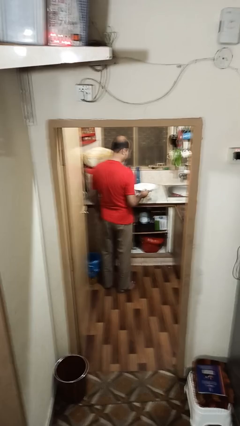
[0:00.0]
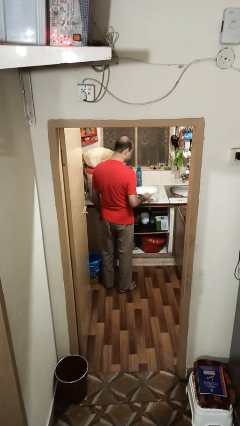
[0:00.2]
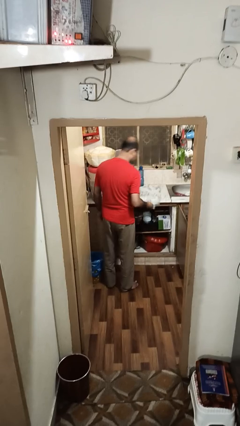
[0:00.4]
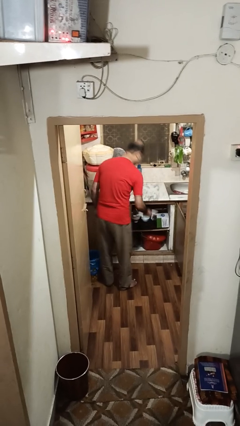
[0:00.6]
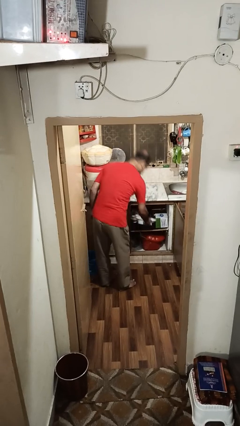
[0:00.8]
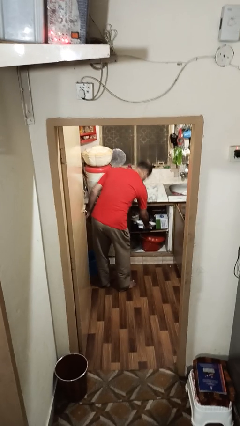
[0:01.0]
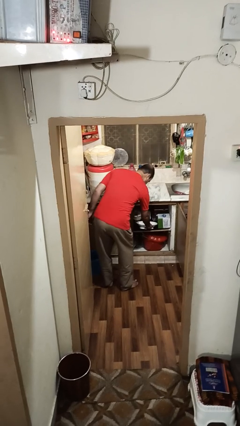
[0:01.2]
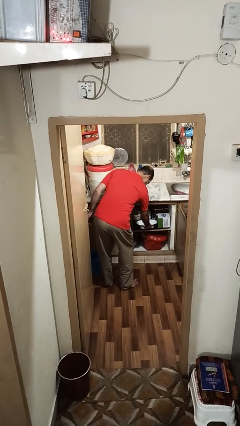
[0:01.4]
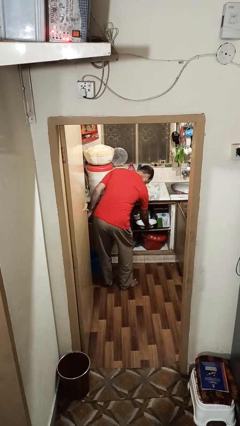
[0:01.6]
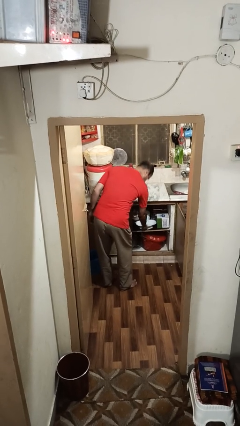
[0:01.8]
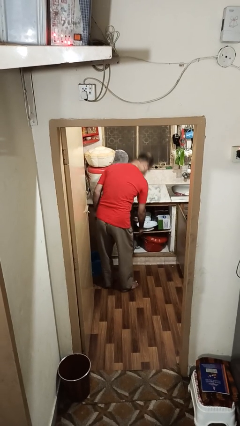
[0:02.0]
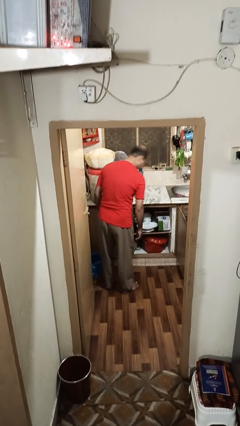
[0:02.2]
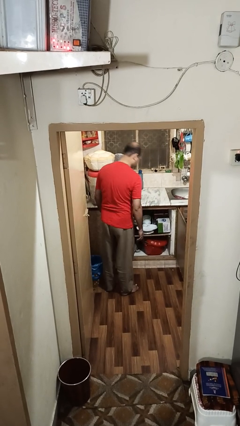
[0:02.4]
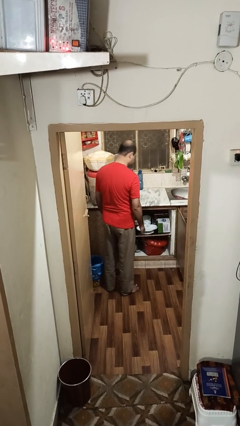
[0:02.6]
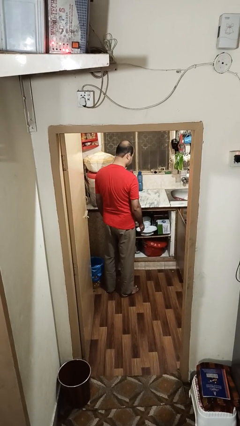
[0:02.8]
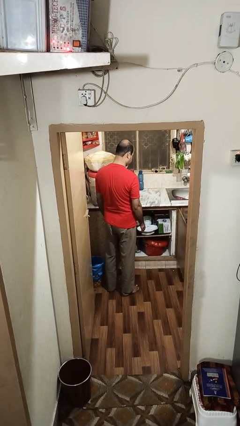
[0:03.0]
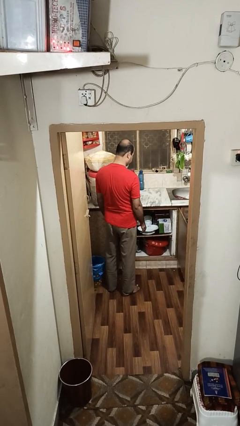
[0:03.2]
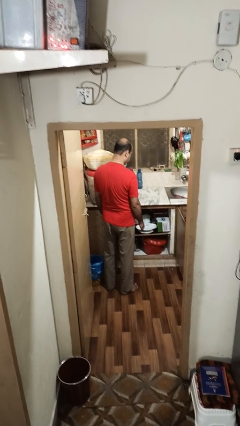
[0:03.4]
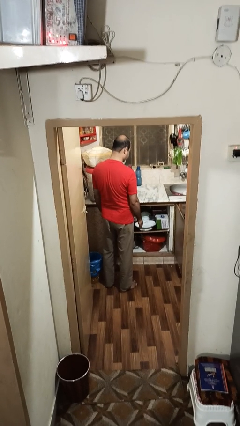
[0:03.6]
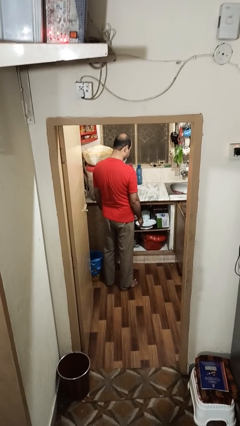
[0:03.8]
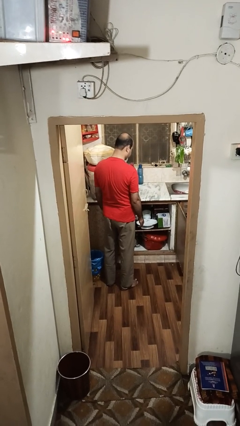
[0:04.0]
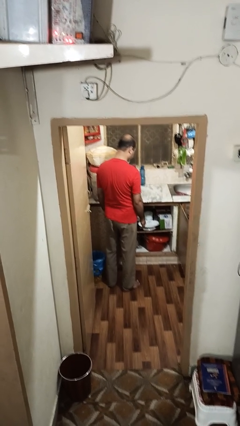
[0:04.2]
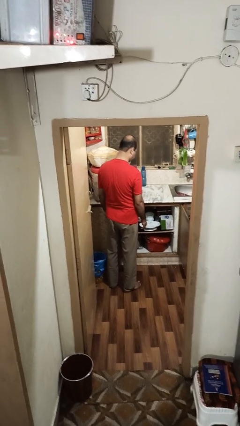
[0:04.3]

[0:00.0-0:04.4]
person puts down object into cabinet

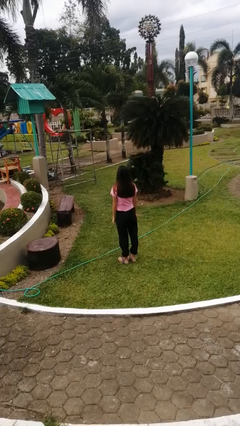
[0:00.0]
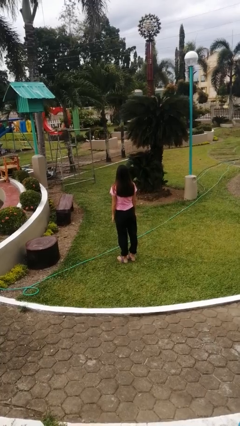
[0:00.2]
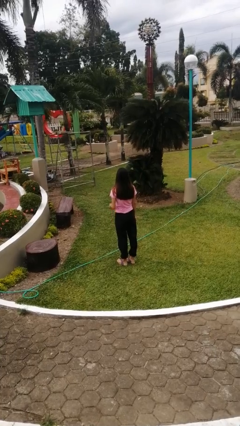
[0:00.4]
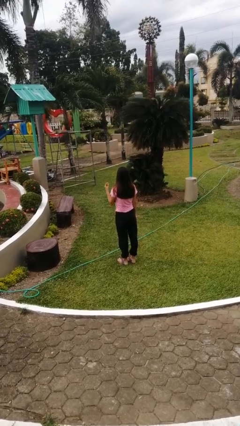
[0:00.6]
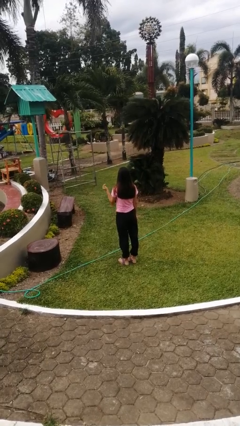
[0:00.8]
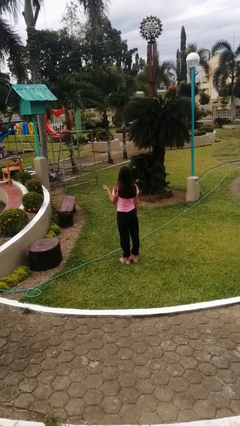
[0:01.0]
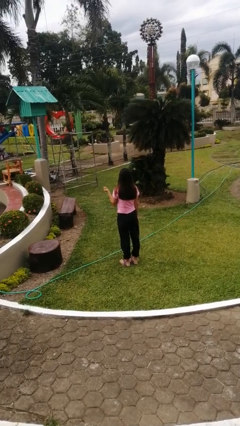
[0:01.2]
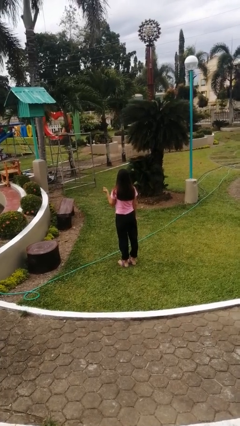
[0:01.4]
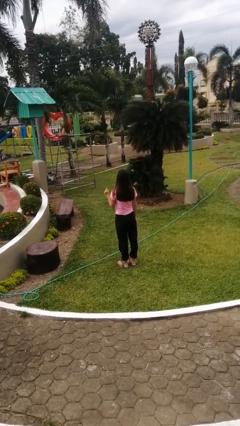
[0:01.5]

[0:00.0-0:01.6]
person snaps fingers

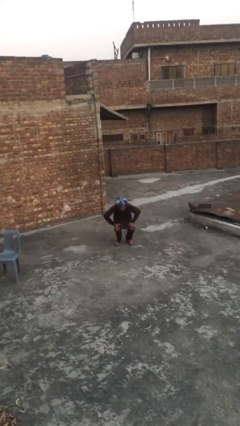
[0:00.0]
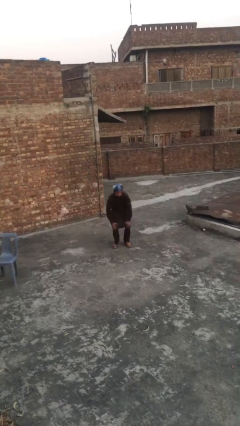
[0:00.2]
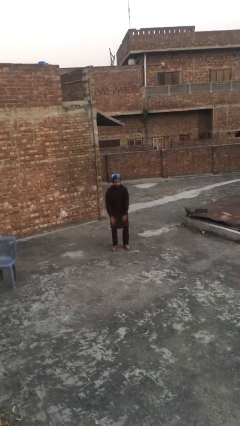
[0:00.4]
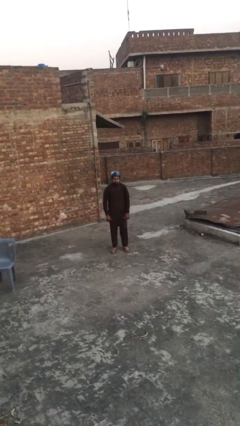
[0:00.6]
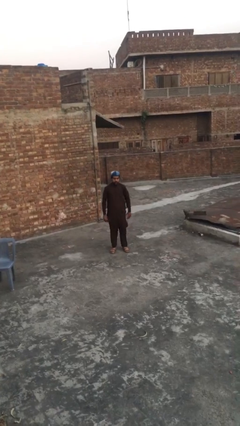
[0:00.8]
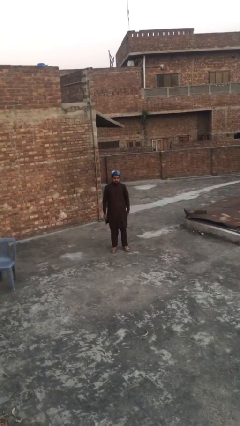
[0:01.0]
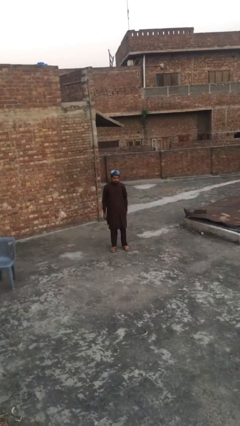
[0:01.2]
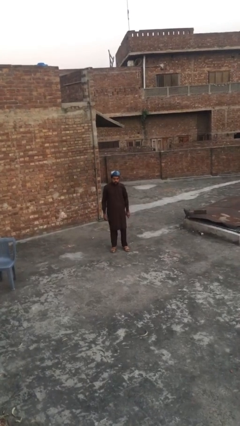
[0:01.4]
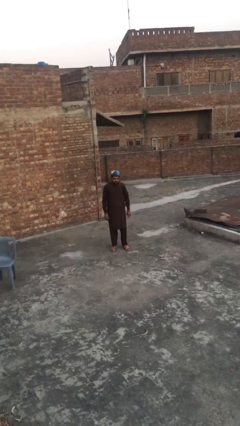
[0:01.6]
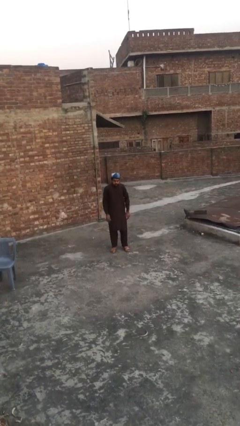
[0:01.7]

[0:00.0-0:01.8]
person stands up

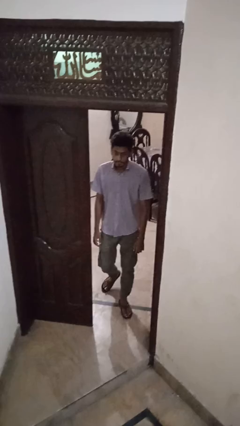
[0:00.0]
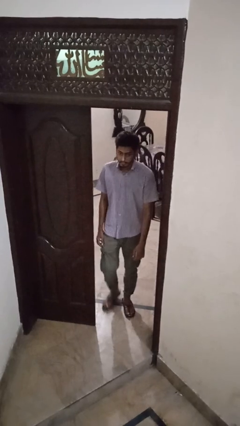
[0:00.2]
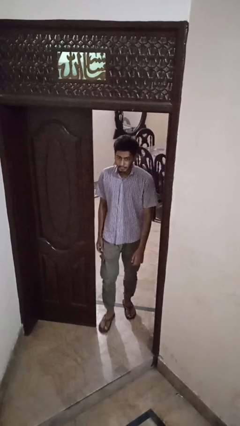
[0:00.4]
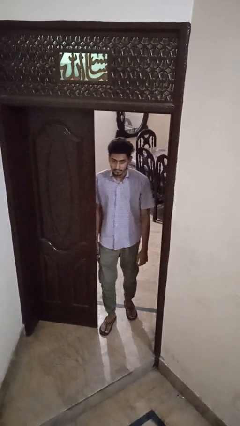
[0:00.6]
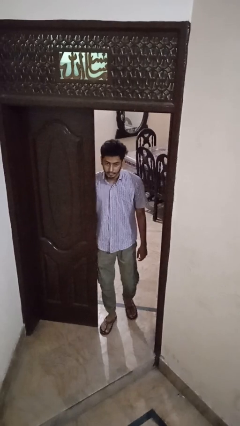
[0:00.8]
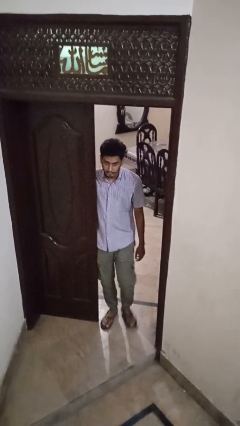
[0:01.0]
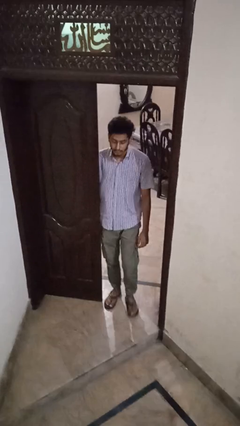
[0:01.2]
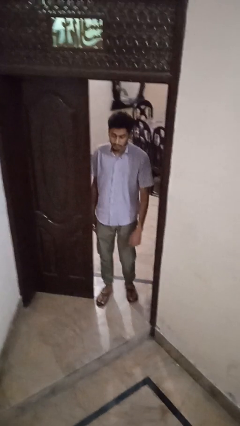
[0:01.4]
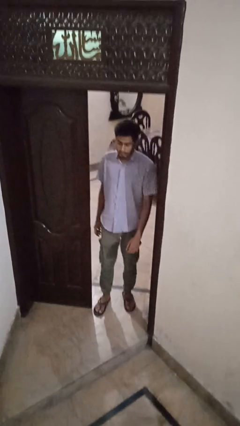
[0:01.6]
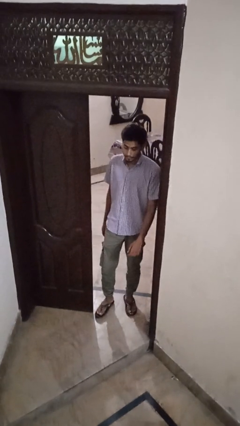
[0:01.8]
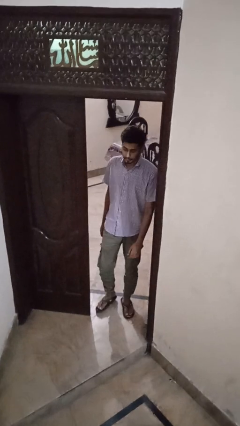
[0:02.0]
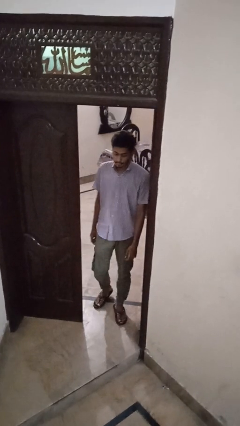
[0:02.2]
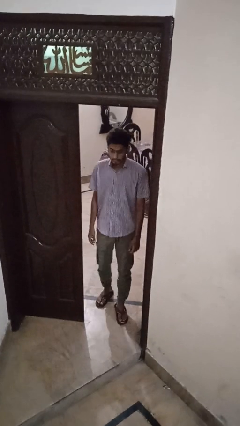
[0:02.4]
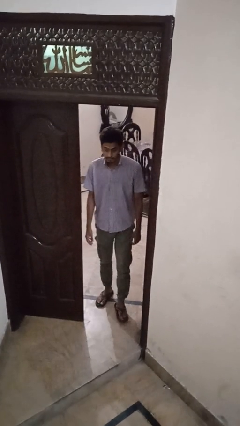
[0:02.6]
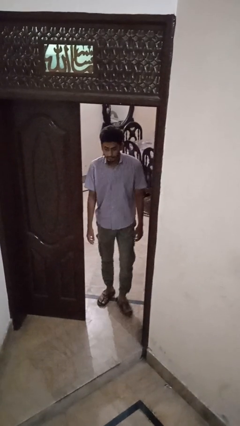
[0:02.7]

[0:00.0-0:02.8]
person bumps into wall

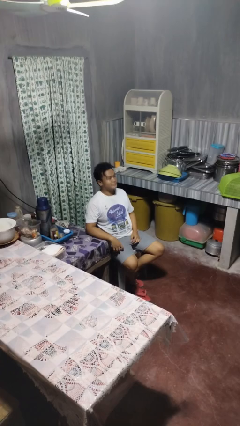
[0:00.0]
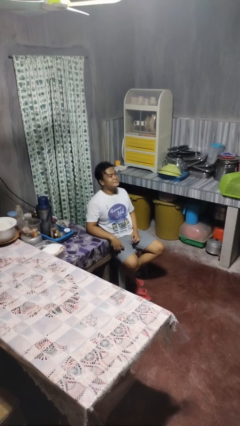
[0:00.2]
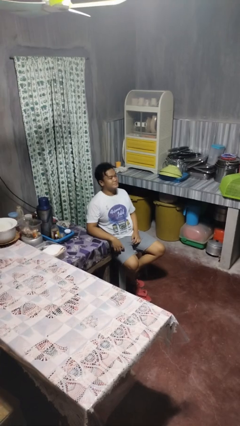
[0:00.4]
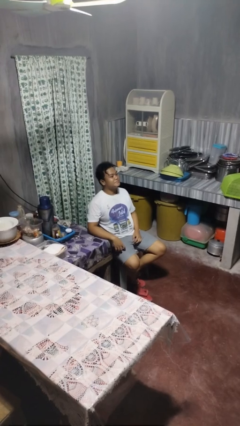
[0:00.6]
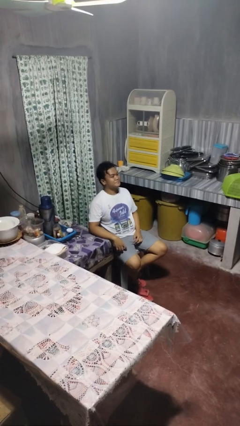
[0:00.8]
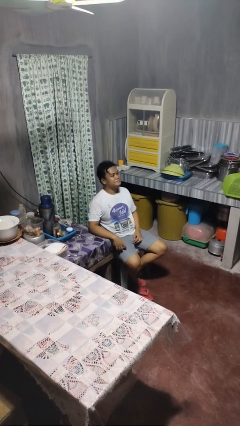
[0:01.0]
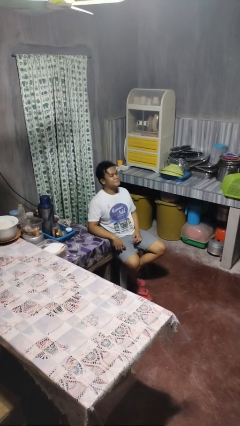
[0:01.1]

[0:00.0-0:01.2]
person nods head

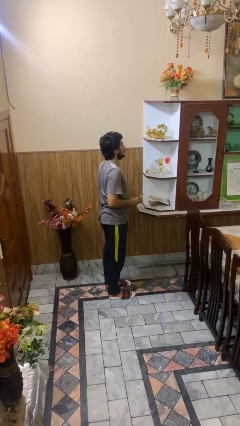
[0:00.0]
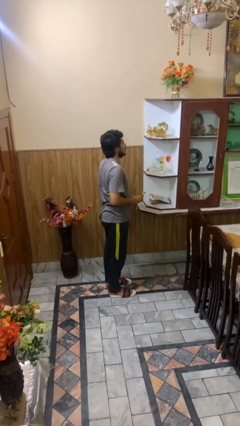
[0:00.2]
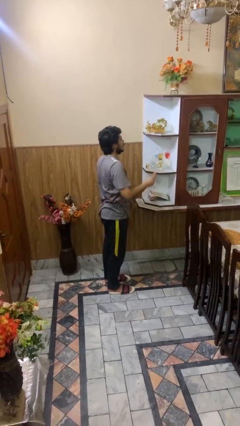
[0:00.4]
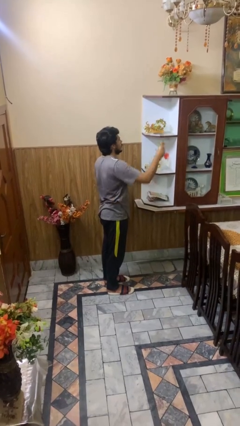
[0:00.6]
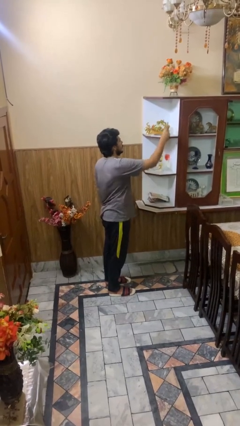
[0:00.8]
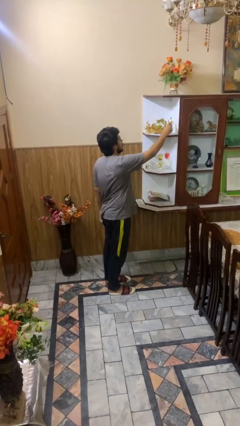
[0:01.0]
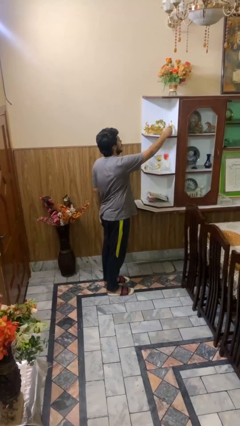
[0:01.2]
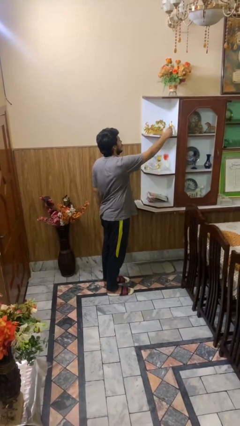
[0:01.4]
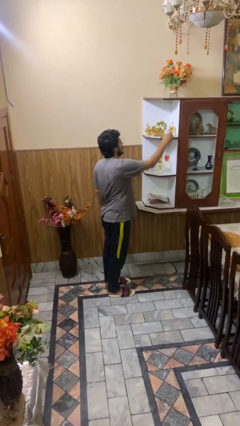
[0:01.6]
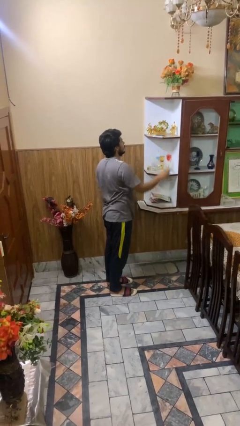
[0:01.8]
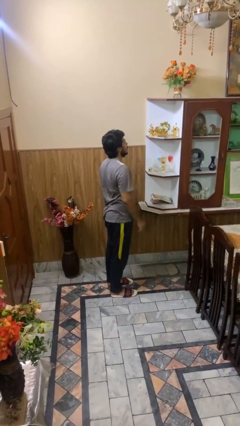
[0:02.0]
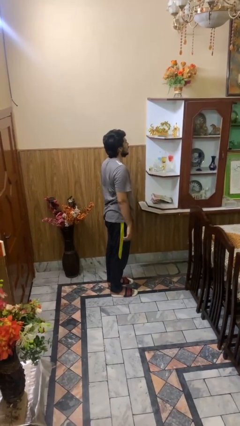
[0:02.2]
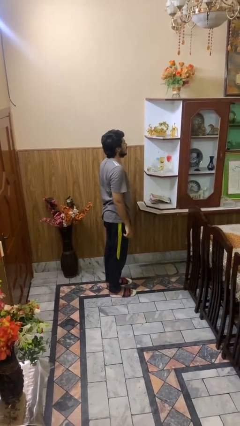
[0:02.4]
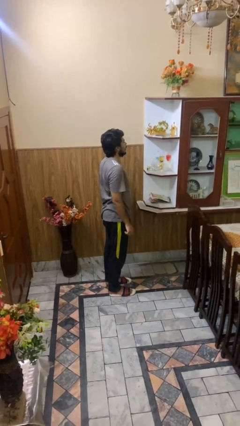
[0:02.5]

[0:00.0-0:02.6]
person puts down object on shelf

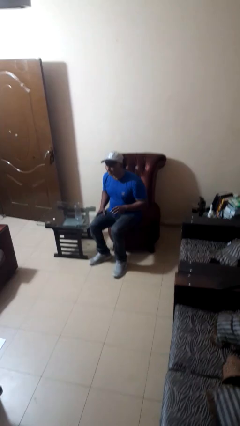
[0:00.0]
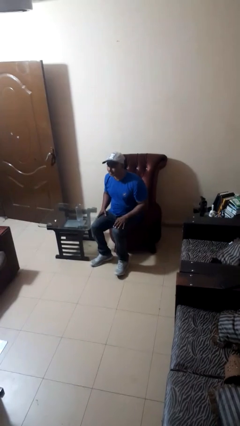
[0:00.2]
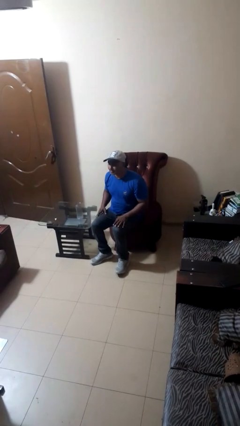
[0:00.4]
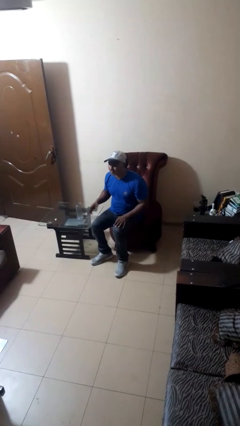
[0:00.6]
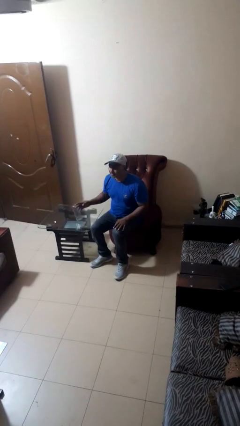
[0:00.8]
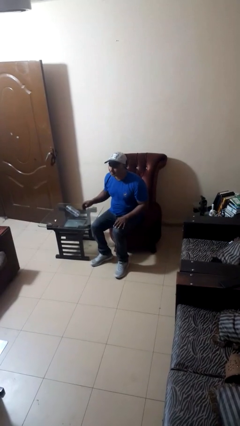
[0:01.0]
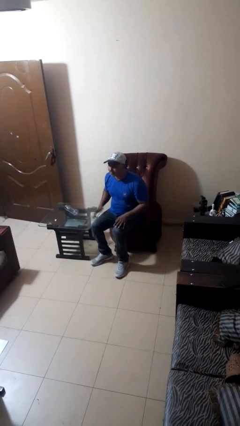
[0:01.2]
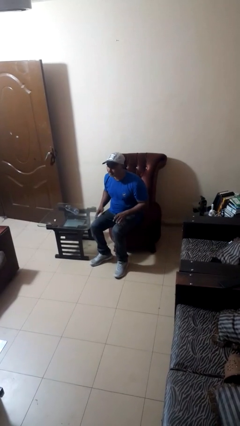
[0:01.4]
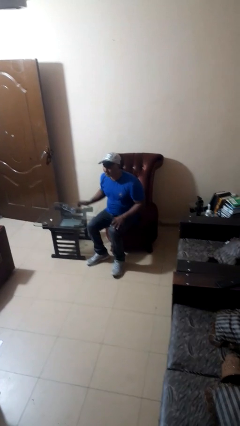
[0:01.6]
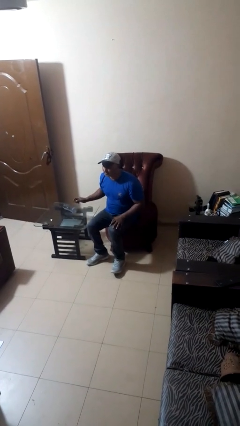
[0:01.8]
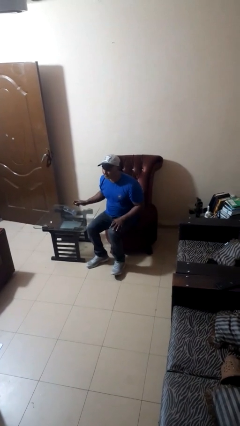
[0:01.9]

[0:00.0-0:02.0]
person knocks over glass

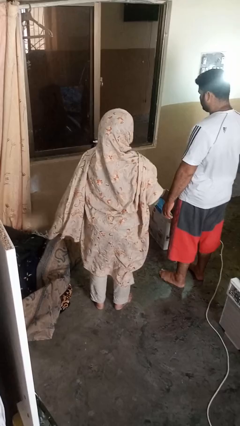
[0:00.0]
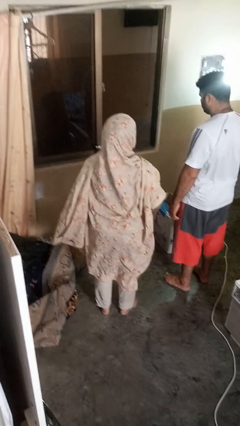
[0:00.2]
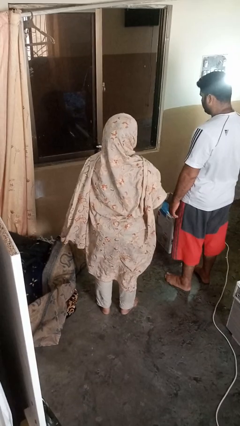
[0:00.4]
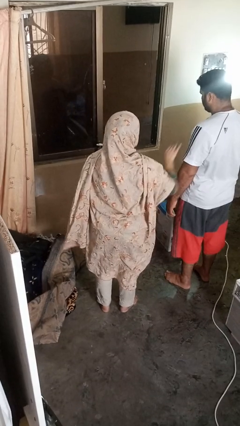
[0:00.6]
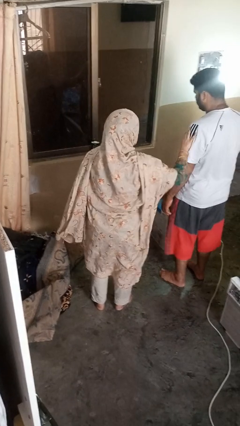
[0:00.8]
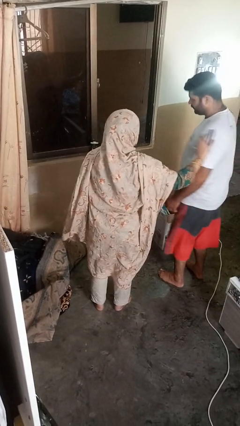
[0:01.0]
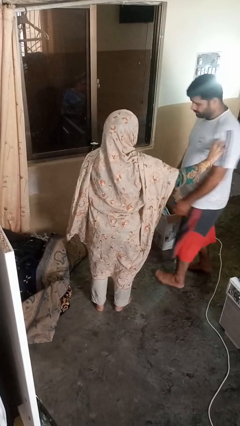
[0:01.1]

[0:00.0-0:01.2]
person grabs person by shoulder
